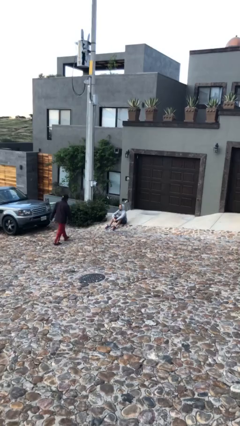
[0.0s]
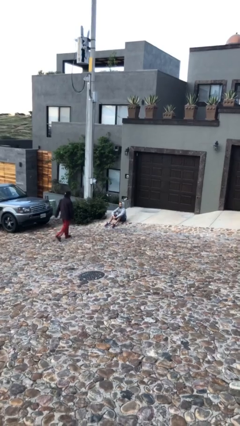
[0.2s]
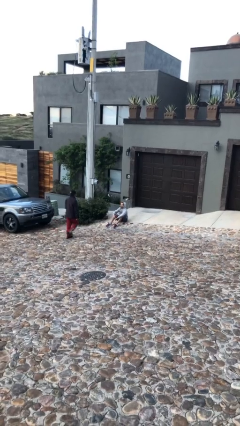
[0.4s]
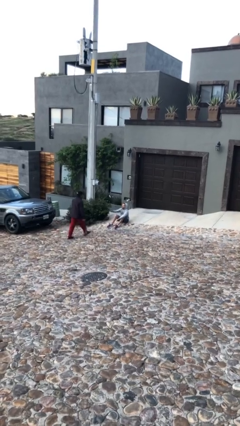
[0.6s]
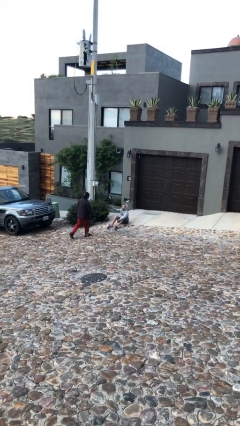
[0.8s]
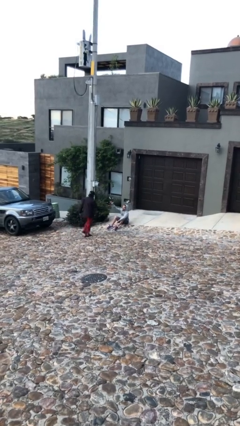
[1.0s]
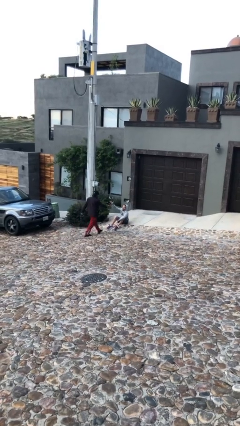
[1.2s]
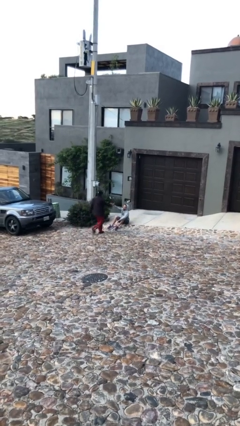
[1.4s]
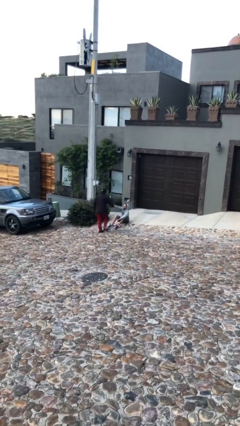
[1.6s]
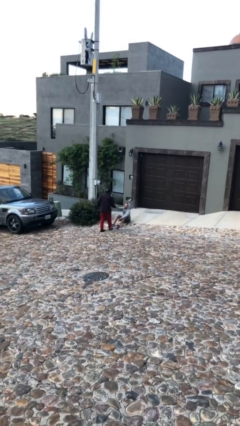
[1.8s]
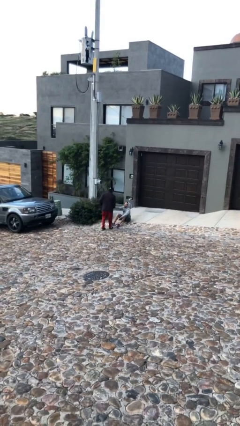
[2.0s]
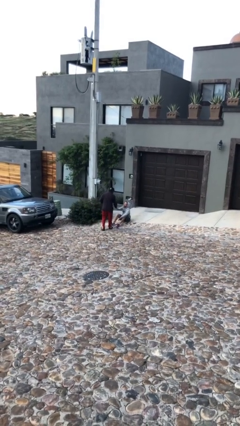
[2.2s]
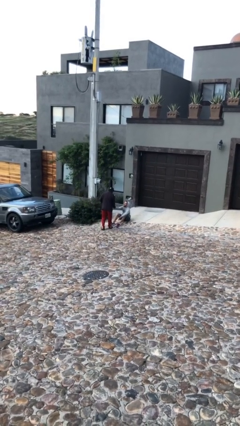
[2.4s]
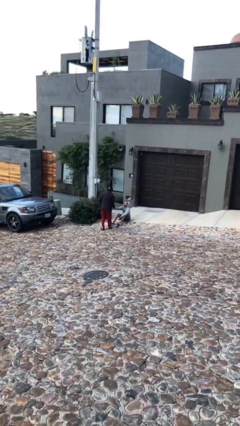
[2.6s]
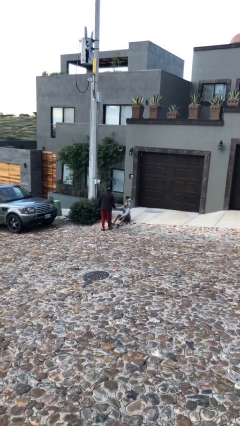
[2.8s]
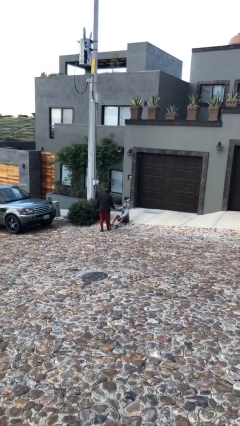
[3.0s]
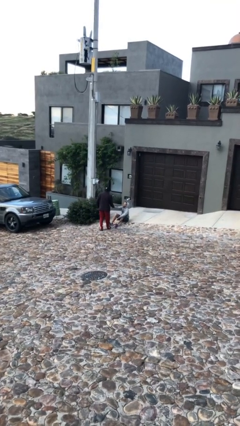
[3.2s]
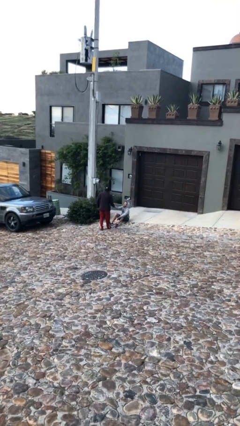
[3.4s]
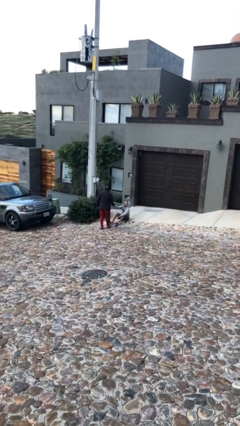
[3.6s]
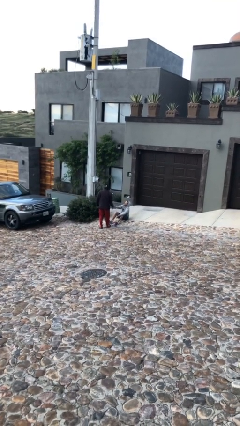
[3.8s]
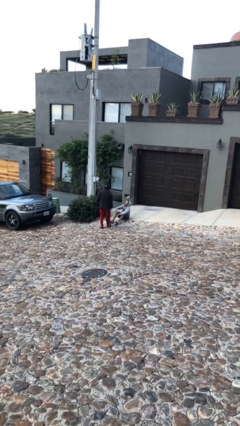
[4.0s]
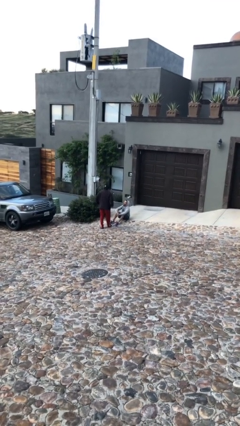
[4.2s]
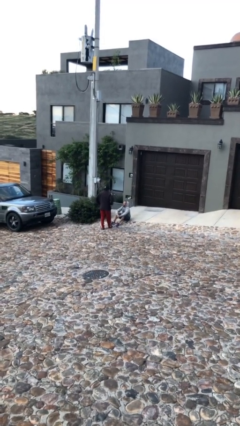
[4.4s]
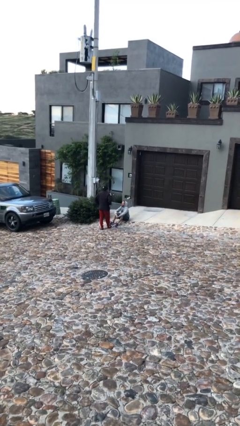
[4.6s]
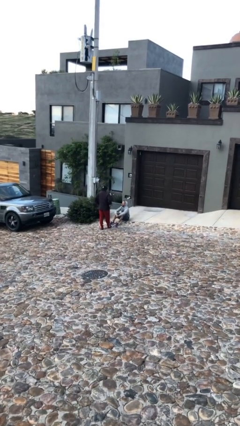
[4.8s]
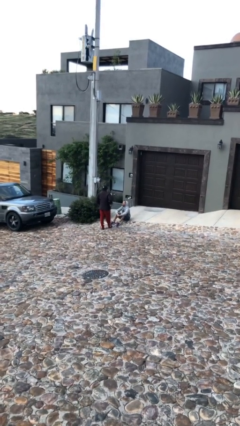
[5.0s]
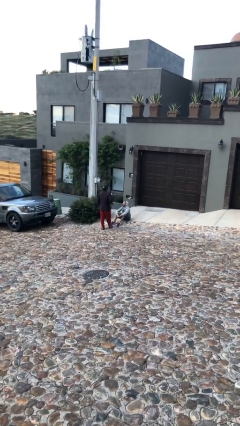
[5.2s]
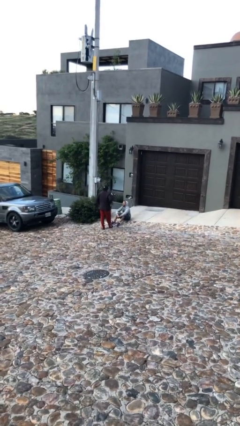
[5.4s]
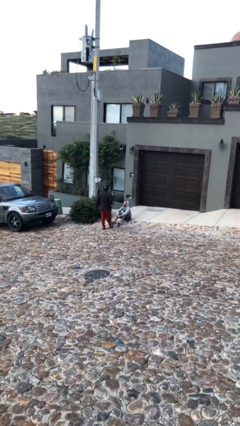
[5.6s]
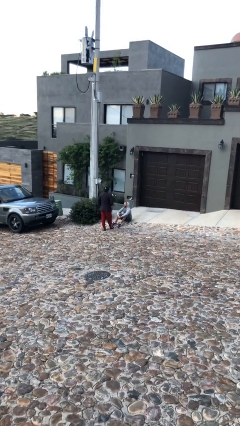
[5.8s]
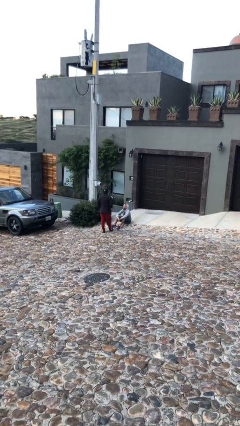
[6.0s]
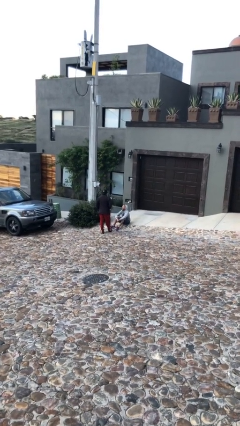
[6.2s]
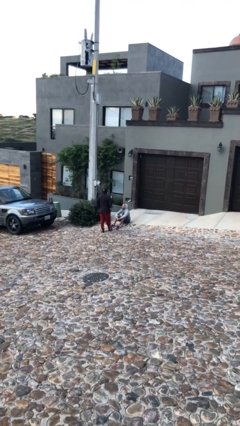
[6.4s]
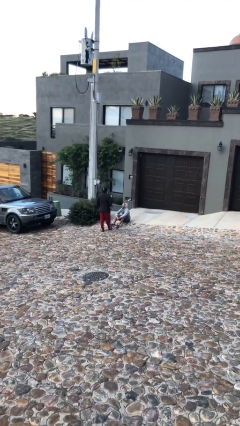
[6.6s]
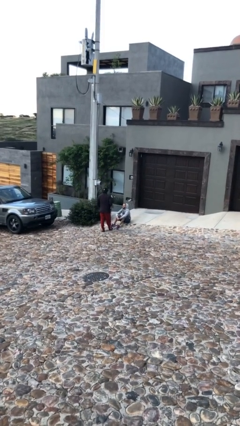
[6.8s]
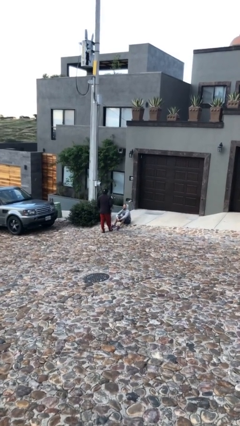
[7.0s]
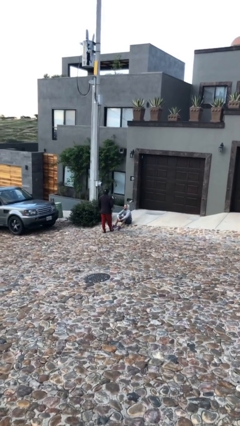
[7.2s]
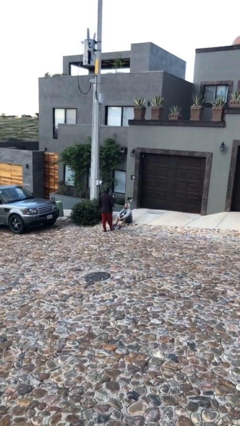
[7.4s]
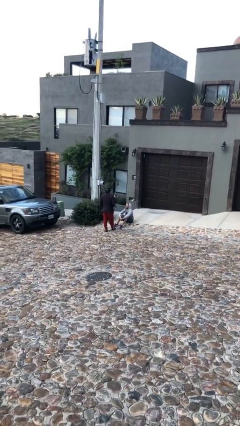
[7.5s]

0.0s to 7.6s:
person shakes hand

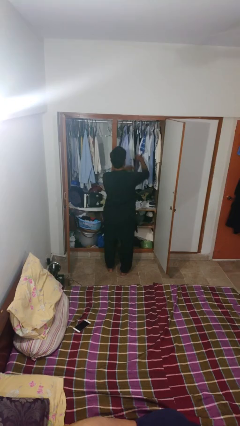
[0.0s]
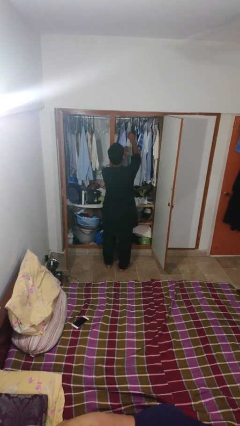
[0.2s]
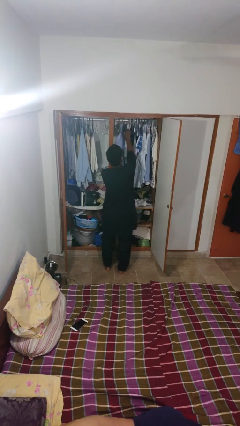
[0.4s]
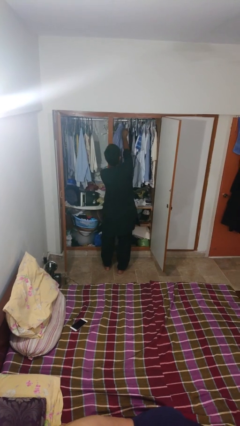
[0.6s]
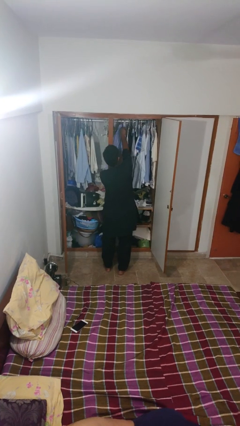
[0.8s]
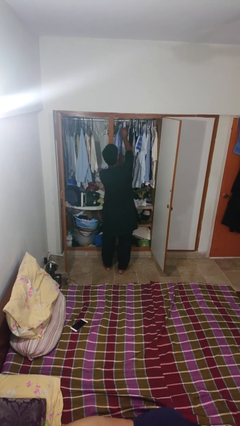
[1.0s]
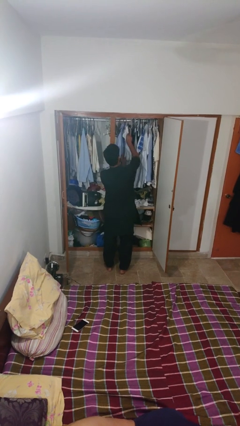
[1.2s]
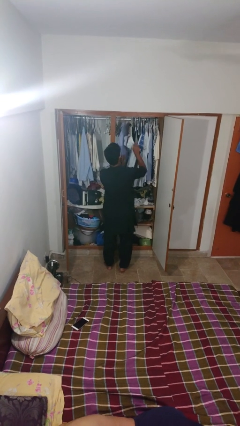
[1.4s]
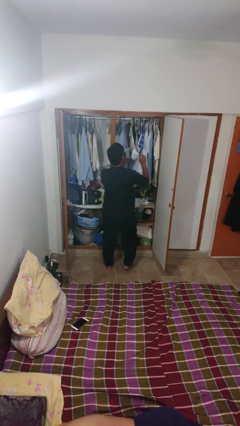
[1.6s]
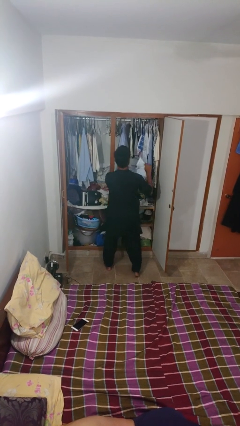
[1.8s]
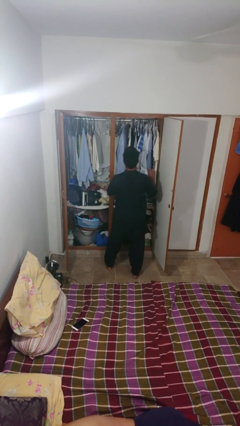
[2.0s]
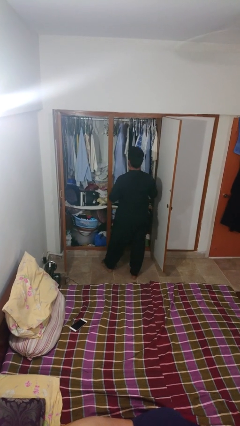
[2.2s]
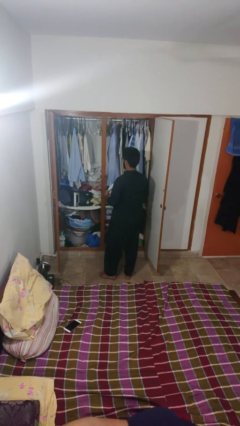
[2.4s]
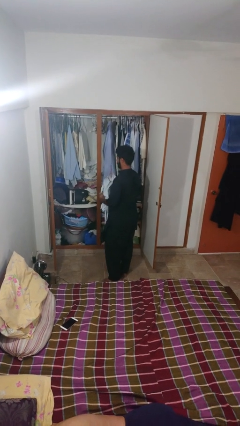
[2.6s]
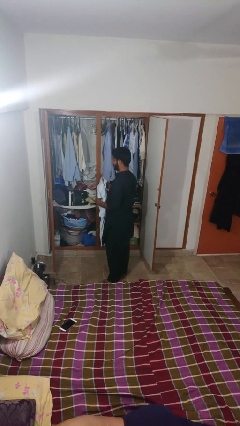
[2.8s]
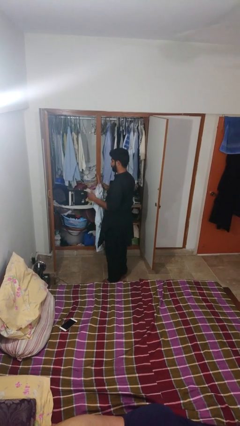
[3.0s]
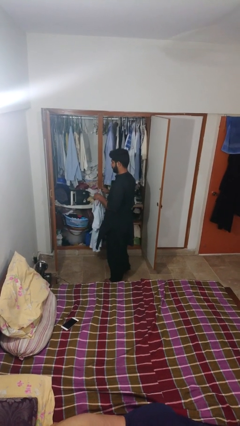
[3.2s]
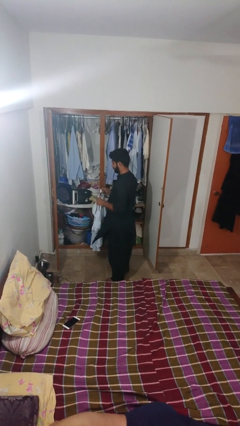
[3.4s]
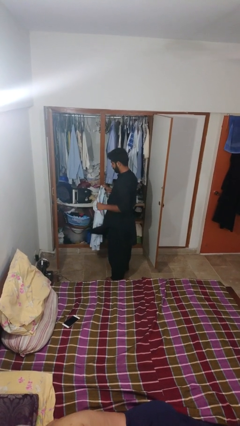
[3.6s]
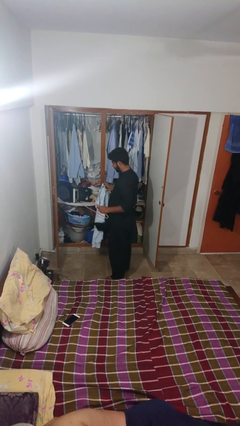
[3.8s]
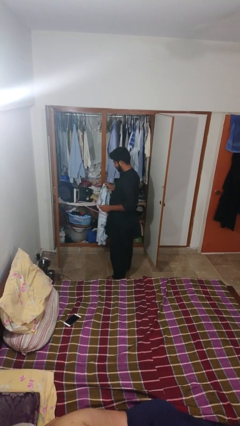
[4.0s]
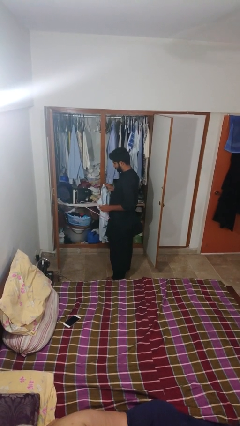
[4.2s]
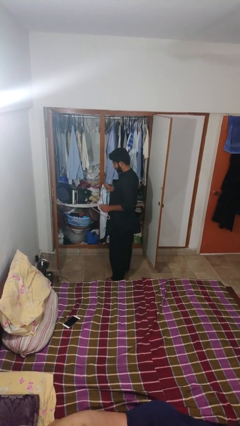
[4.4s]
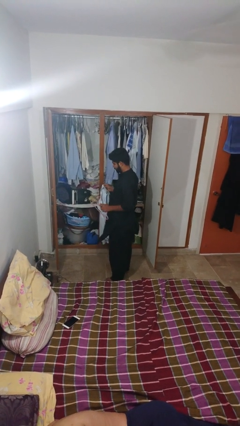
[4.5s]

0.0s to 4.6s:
person takes clothes from closet

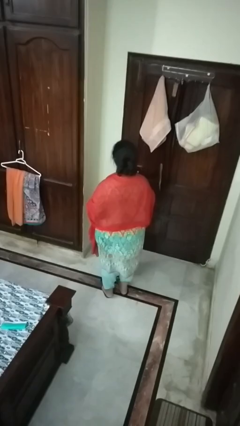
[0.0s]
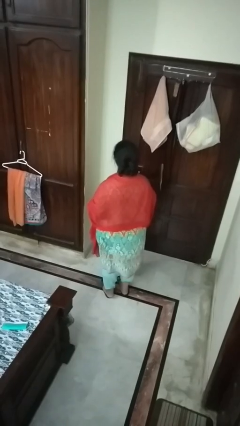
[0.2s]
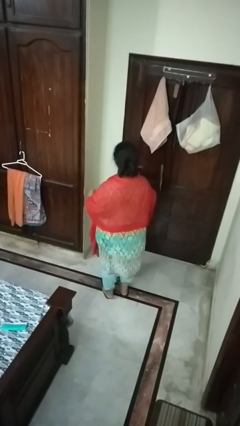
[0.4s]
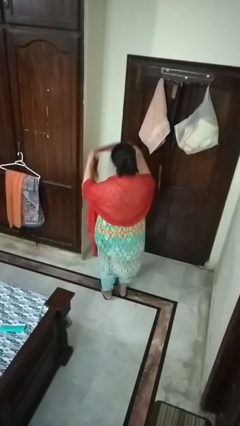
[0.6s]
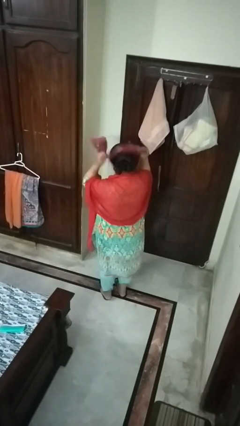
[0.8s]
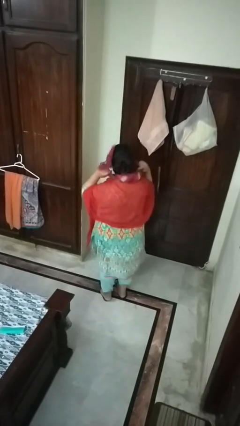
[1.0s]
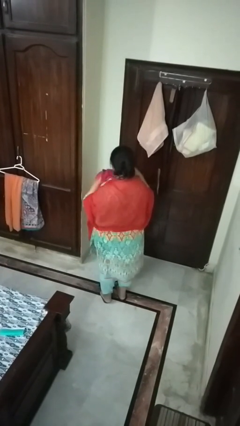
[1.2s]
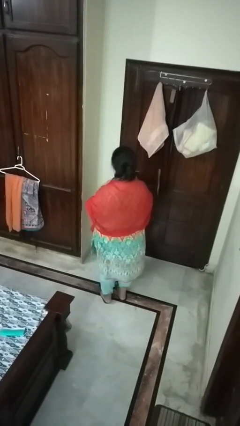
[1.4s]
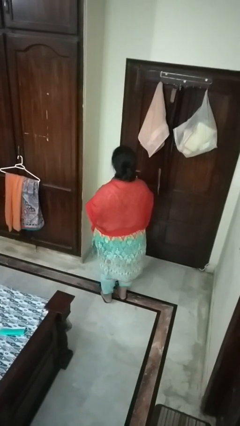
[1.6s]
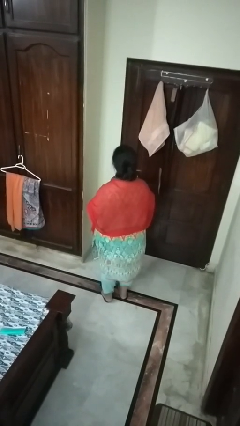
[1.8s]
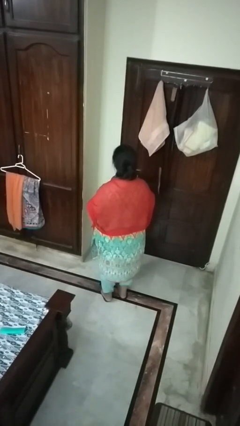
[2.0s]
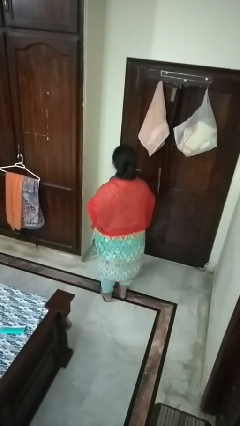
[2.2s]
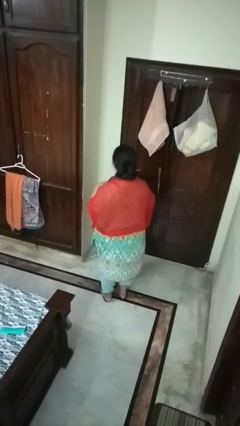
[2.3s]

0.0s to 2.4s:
person puts on scarf

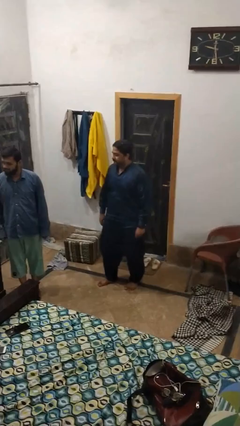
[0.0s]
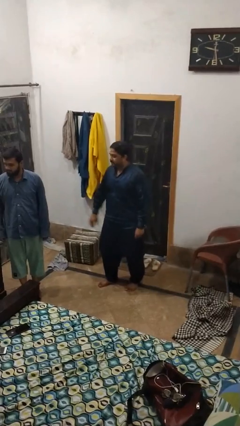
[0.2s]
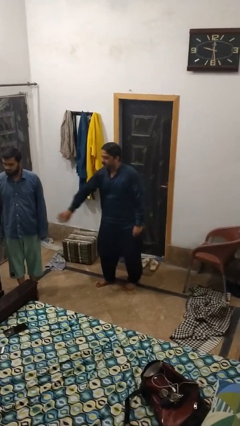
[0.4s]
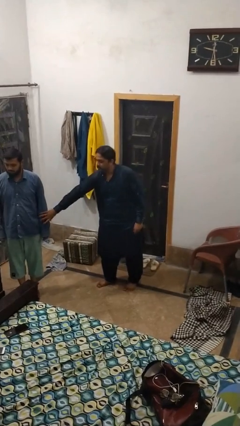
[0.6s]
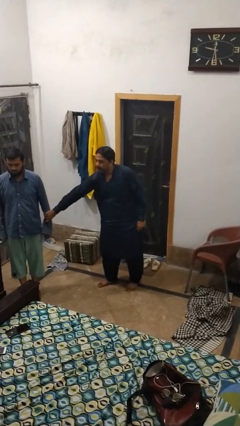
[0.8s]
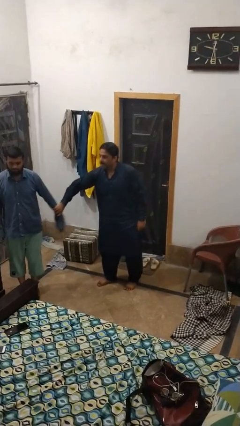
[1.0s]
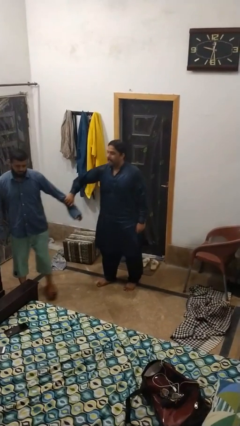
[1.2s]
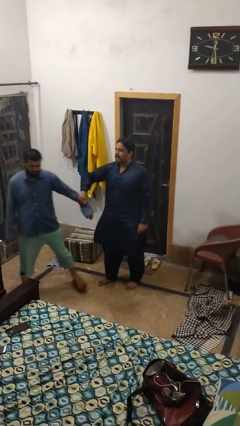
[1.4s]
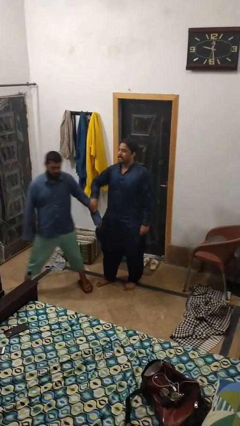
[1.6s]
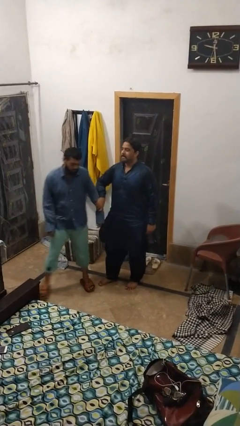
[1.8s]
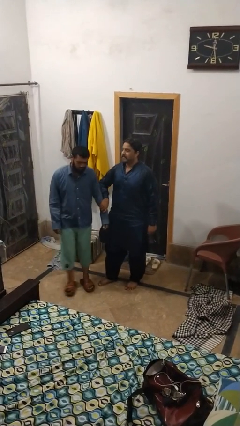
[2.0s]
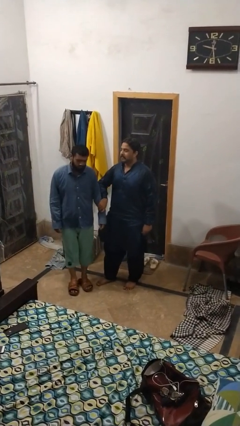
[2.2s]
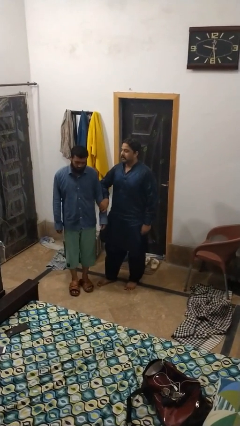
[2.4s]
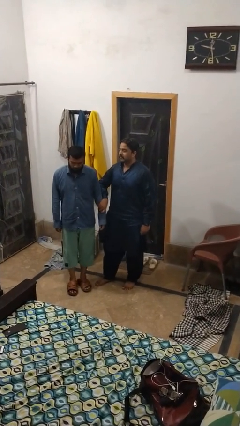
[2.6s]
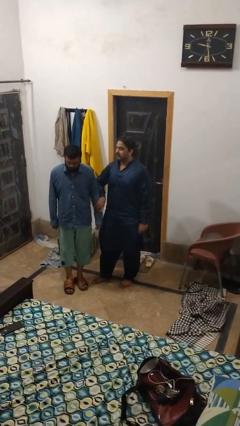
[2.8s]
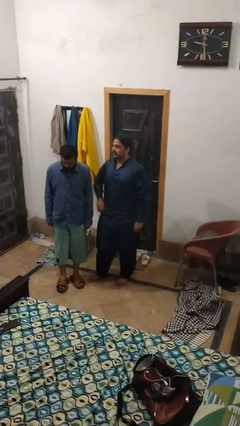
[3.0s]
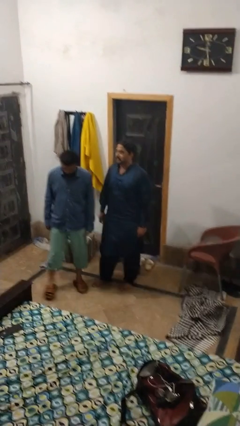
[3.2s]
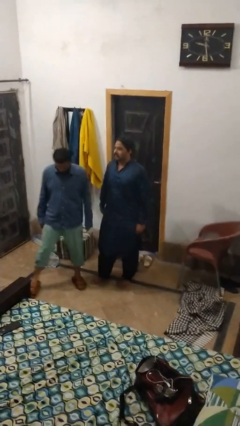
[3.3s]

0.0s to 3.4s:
person grabs person by forearm
